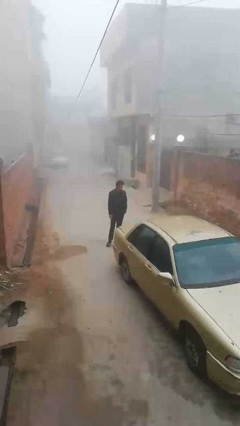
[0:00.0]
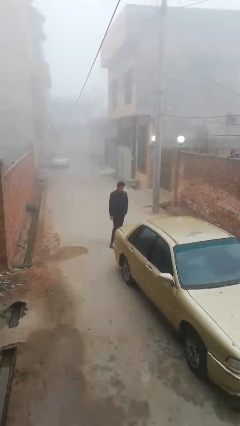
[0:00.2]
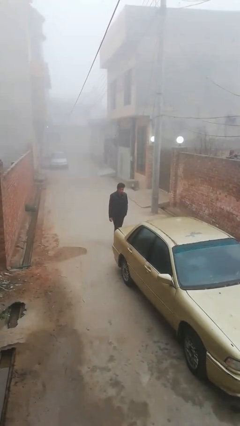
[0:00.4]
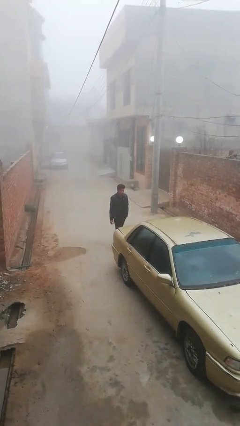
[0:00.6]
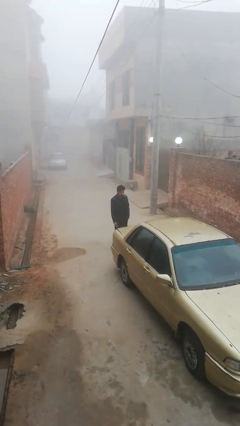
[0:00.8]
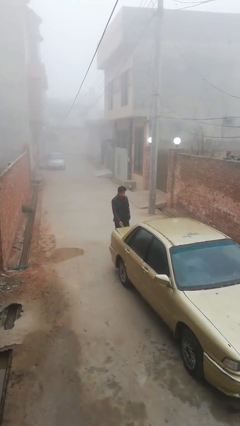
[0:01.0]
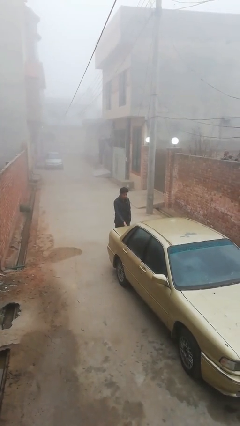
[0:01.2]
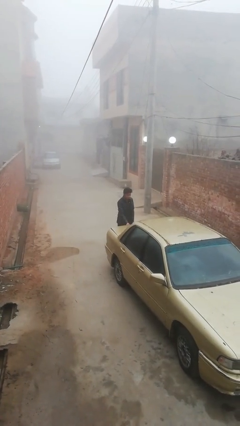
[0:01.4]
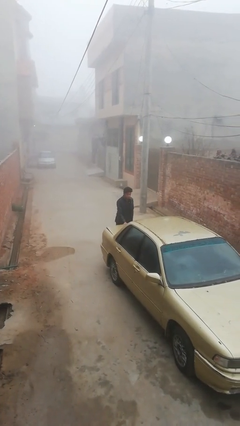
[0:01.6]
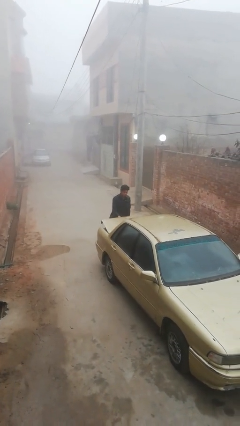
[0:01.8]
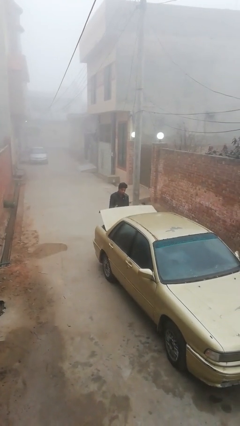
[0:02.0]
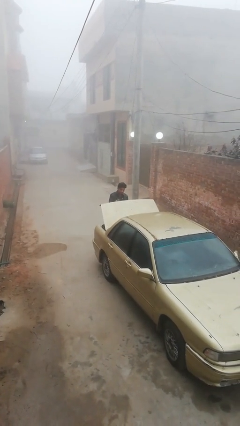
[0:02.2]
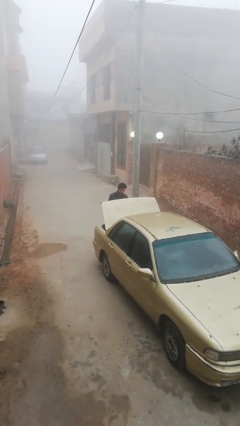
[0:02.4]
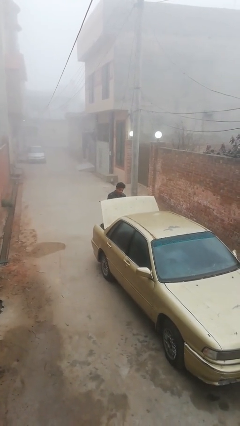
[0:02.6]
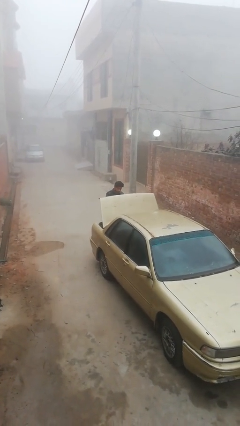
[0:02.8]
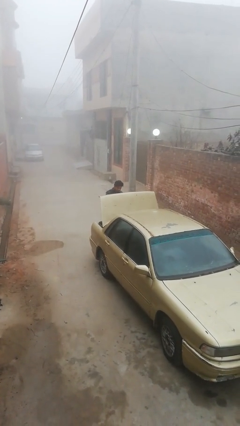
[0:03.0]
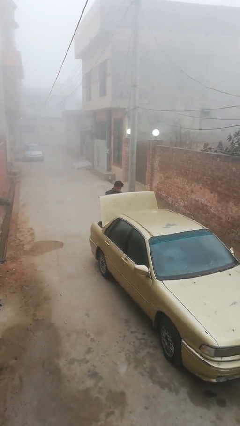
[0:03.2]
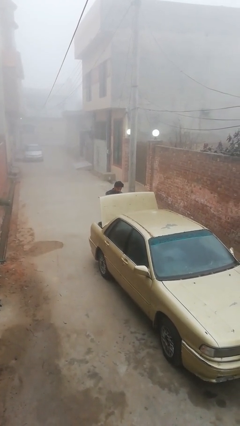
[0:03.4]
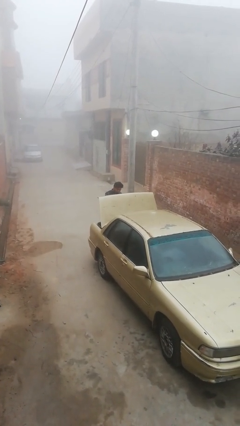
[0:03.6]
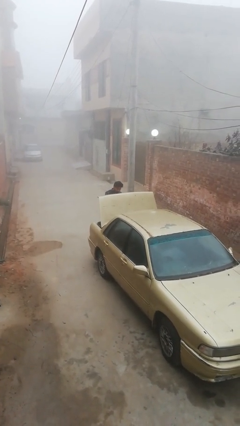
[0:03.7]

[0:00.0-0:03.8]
person opens car trunk

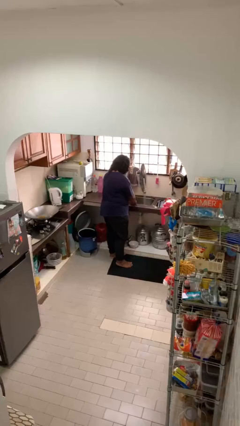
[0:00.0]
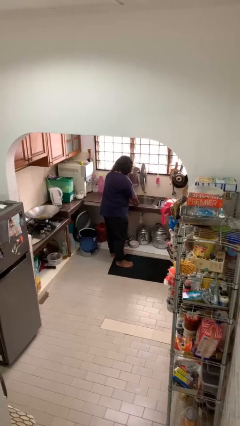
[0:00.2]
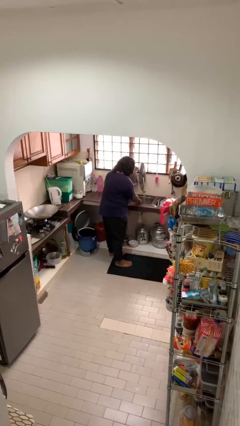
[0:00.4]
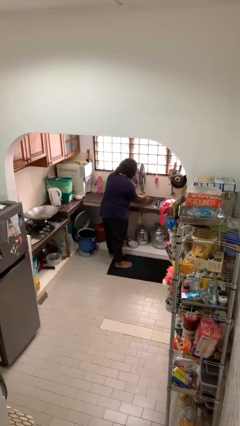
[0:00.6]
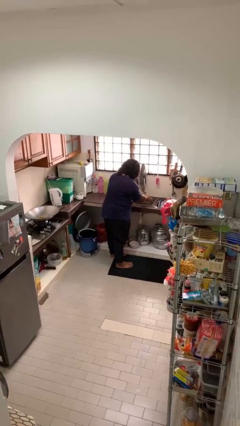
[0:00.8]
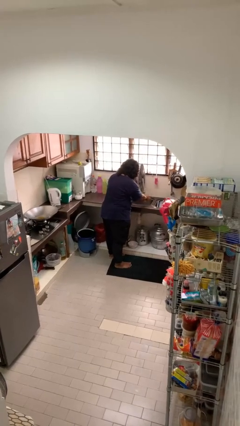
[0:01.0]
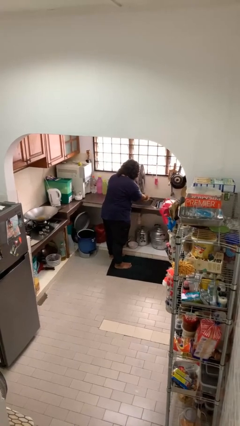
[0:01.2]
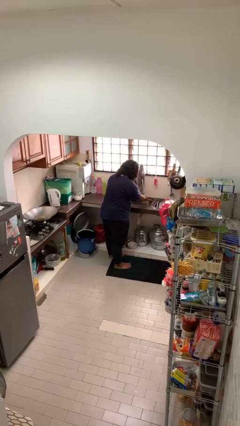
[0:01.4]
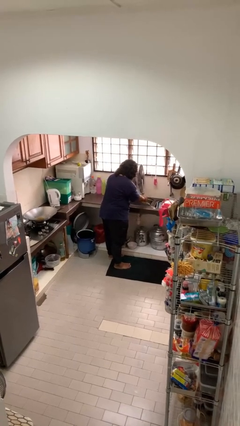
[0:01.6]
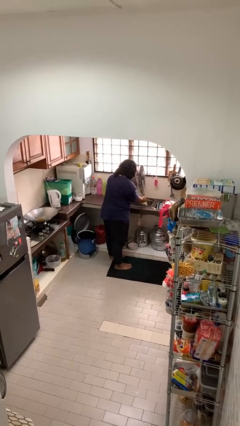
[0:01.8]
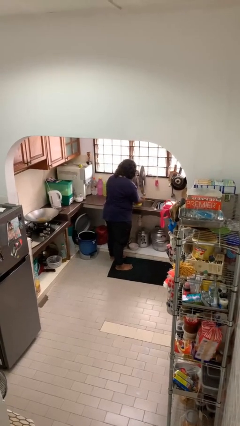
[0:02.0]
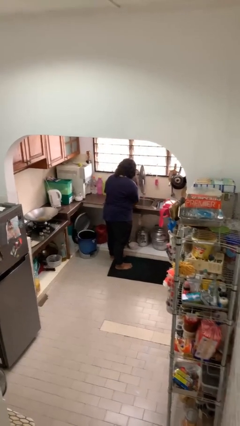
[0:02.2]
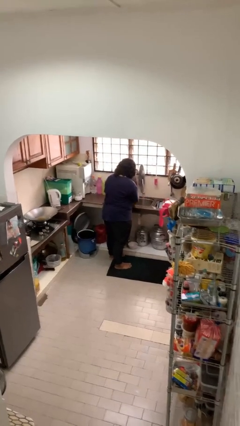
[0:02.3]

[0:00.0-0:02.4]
person washes dish

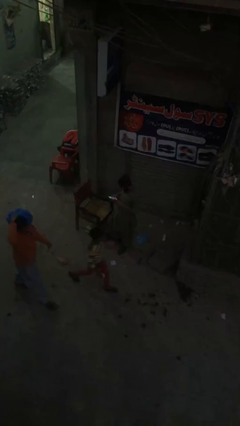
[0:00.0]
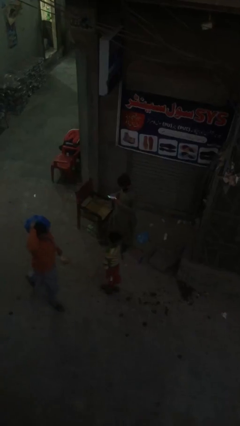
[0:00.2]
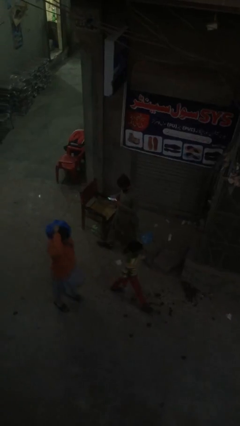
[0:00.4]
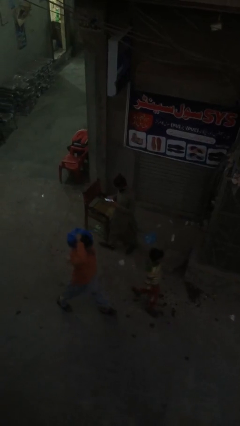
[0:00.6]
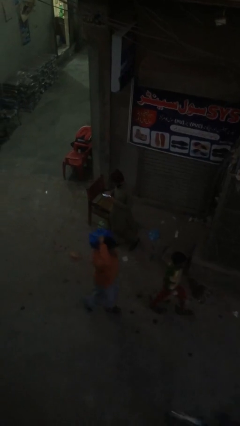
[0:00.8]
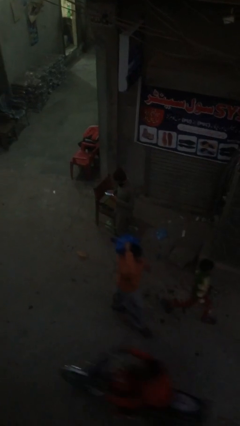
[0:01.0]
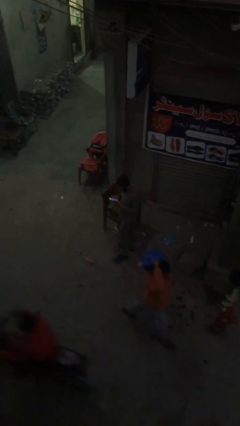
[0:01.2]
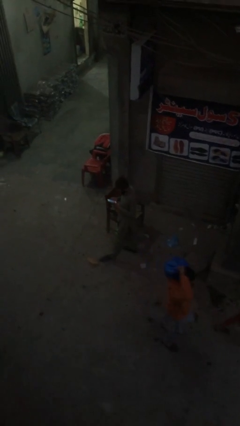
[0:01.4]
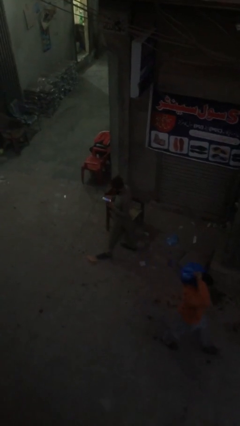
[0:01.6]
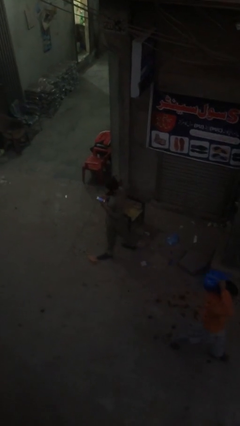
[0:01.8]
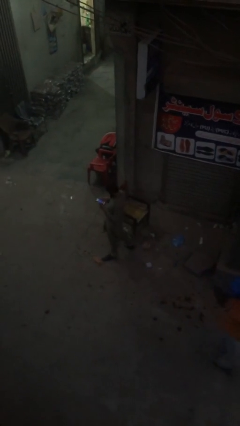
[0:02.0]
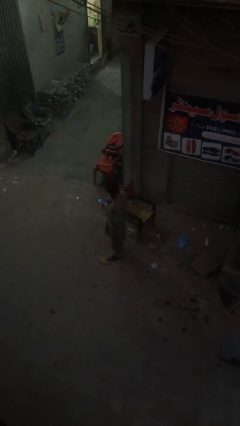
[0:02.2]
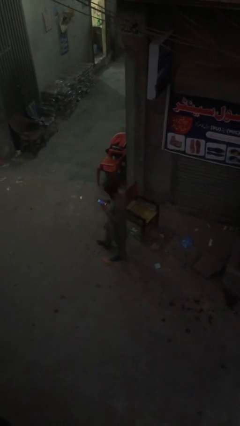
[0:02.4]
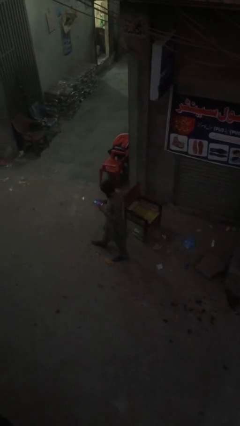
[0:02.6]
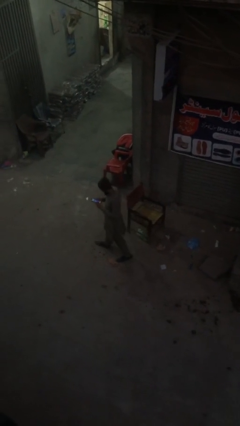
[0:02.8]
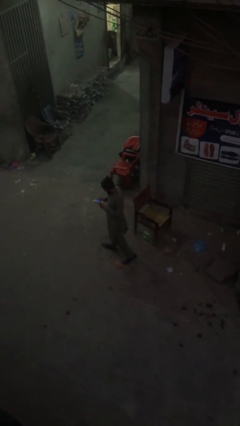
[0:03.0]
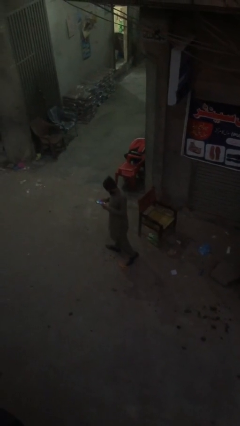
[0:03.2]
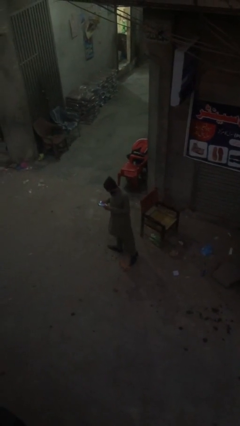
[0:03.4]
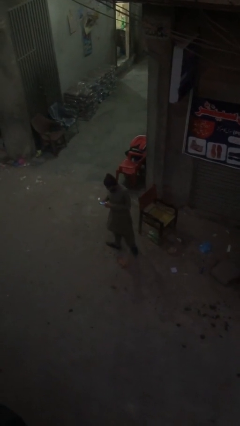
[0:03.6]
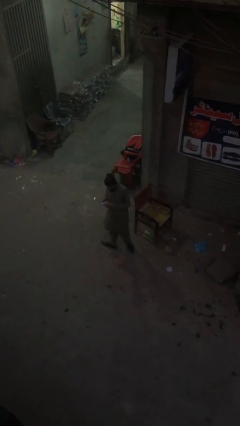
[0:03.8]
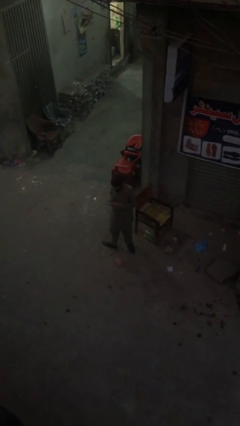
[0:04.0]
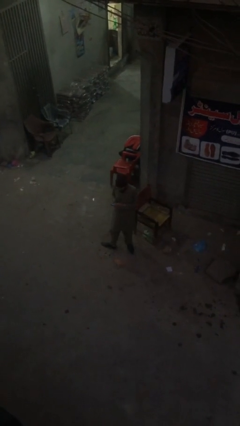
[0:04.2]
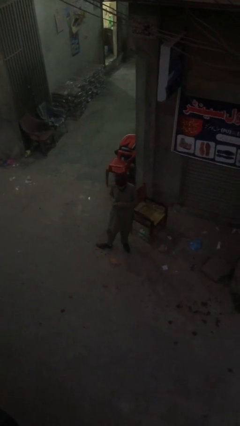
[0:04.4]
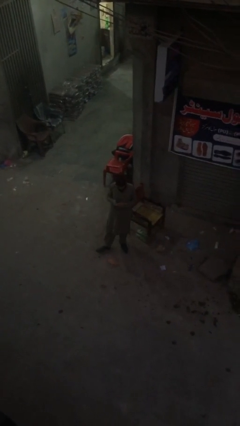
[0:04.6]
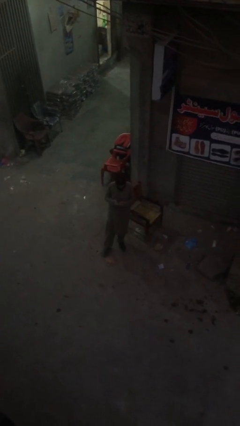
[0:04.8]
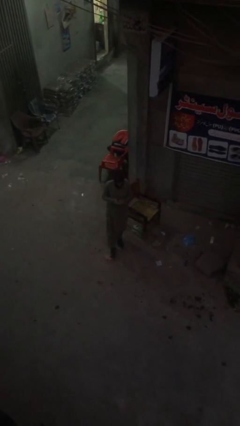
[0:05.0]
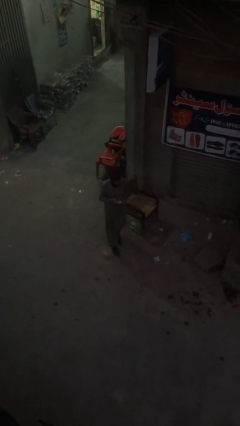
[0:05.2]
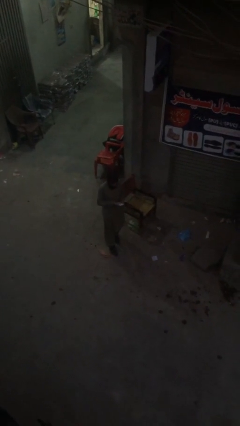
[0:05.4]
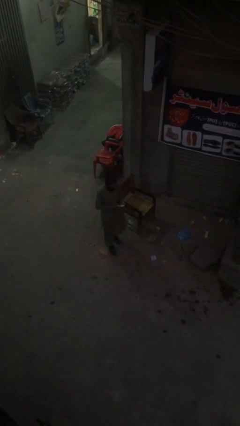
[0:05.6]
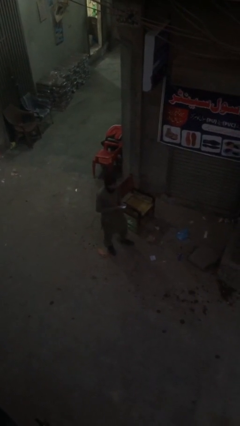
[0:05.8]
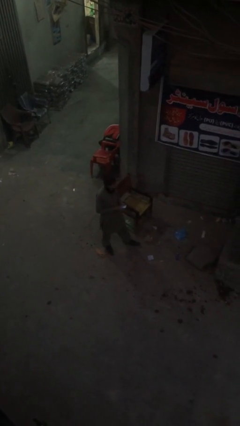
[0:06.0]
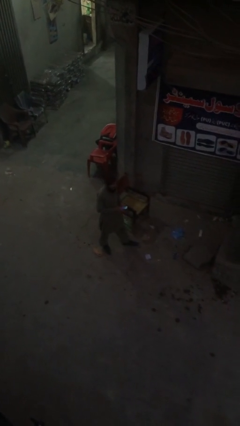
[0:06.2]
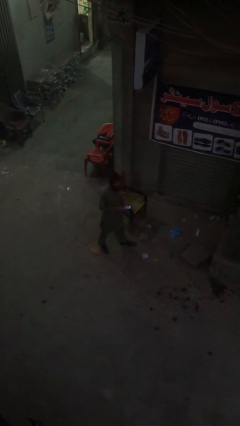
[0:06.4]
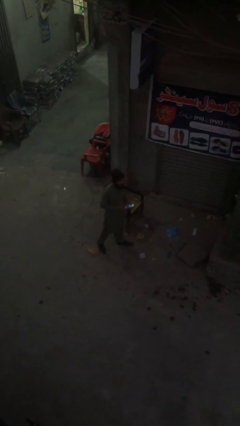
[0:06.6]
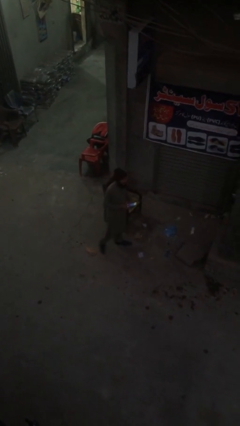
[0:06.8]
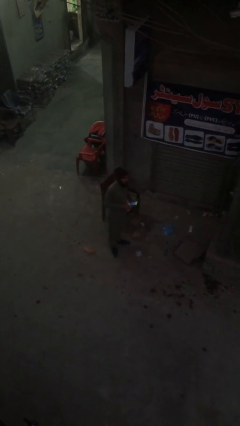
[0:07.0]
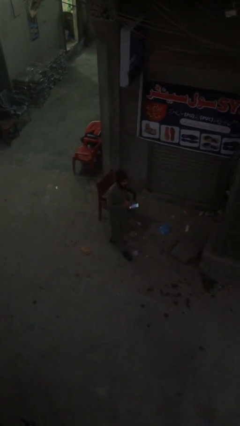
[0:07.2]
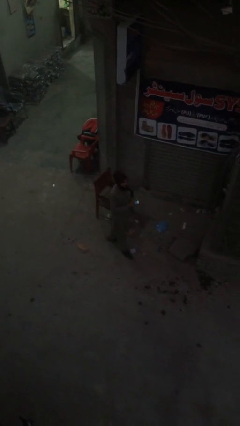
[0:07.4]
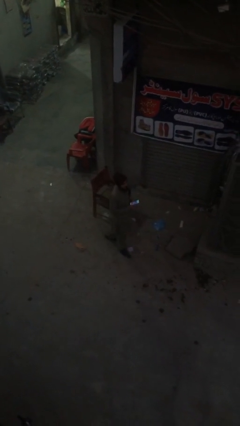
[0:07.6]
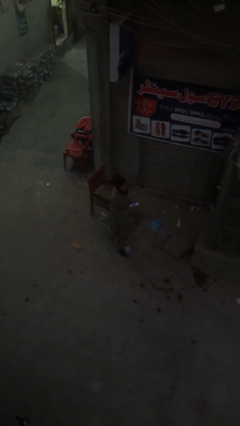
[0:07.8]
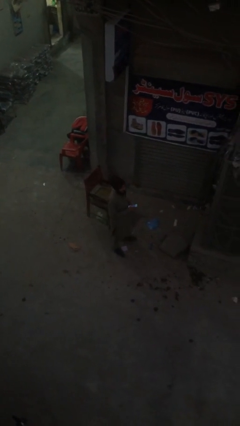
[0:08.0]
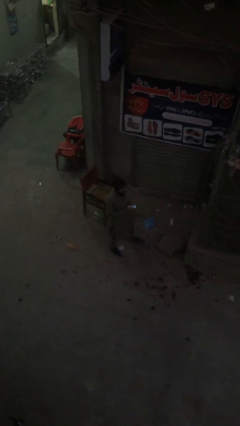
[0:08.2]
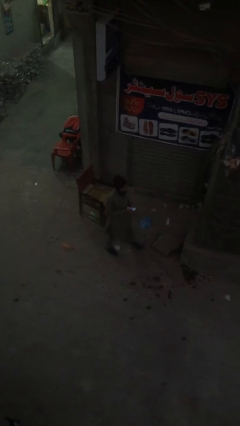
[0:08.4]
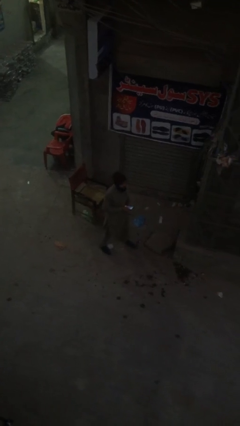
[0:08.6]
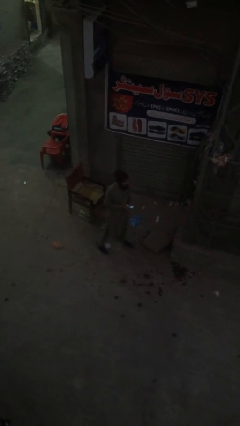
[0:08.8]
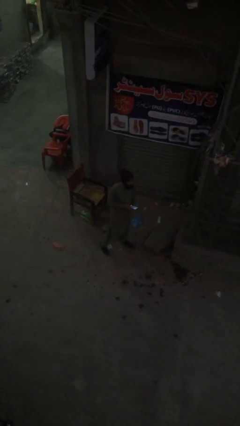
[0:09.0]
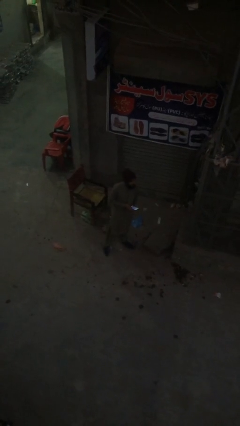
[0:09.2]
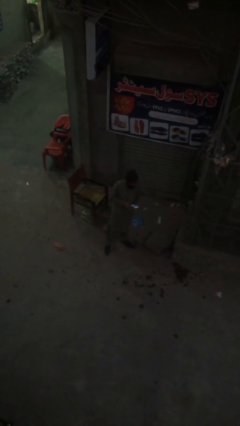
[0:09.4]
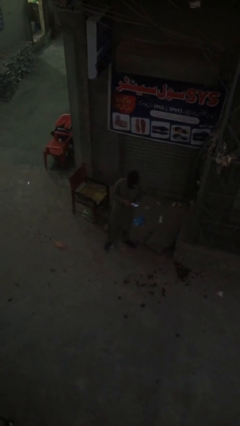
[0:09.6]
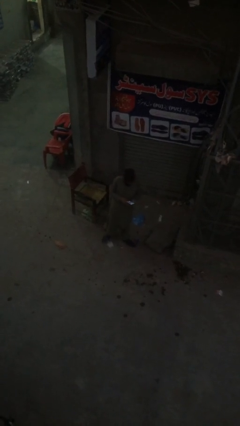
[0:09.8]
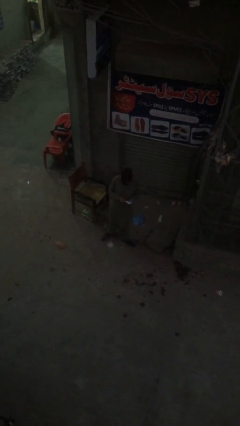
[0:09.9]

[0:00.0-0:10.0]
person walks

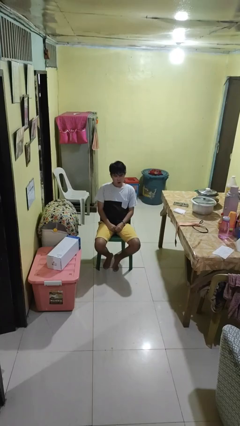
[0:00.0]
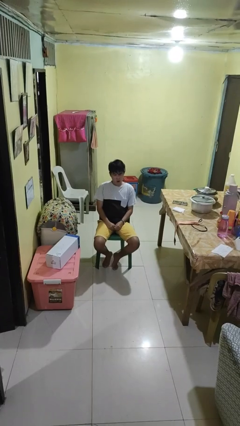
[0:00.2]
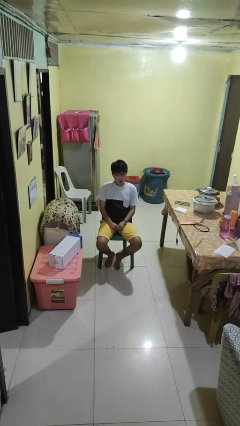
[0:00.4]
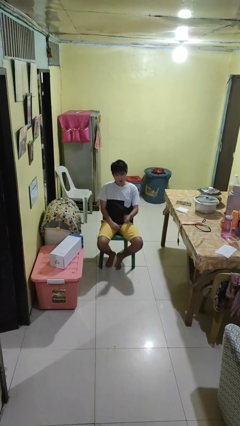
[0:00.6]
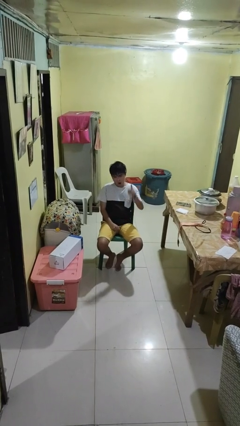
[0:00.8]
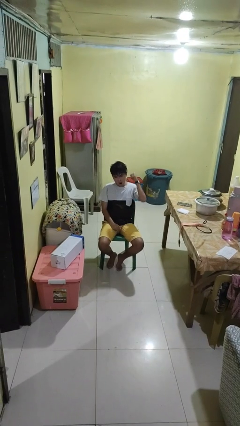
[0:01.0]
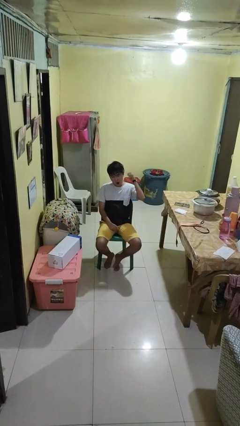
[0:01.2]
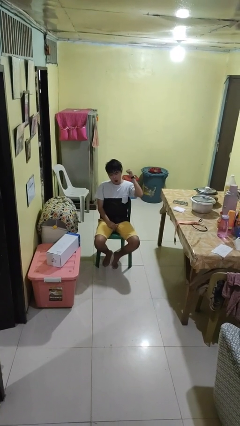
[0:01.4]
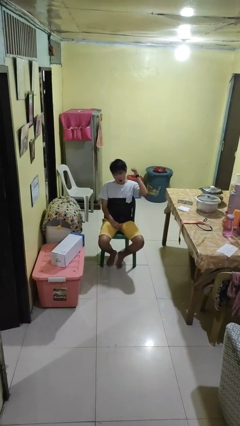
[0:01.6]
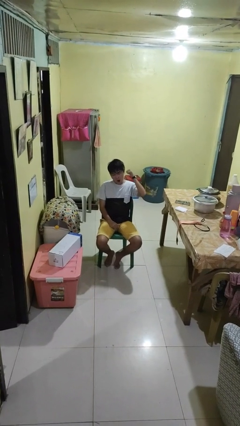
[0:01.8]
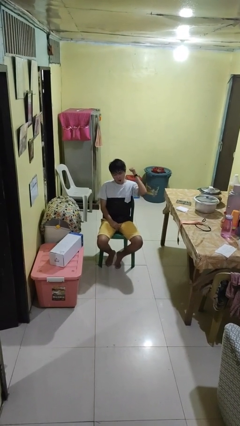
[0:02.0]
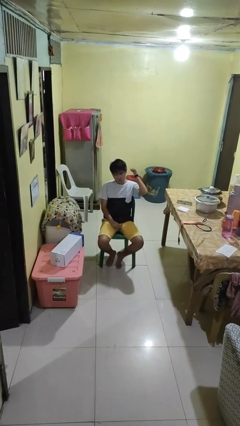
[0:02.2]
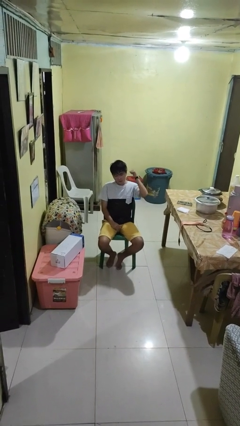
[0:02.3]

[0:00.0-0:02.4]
person gestures behind me
